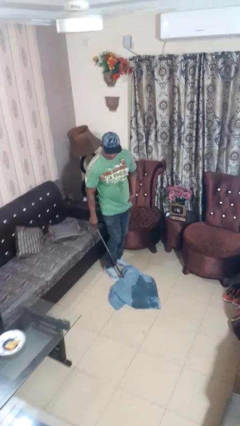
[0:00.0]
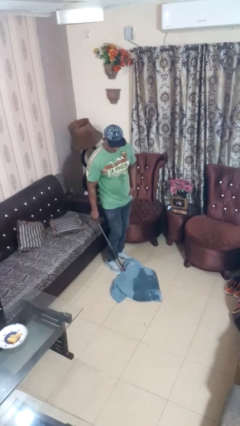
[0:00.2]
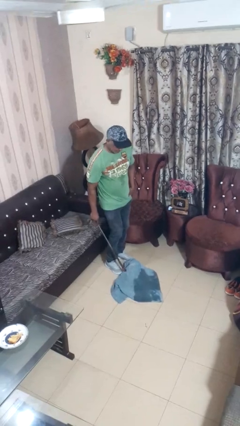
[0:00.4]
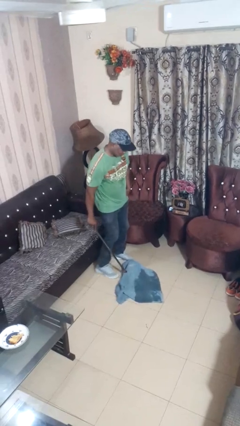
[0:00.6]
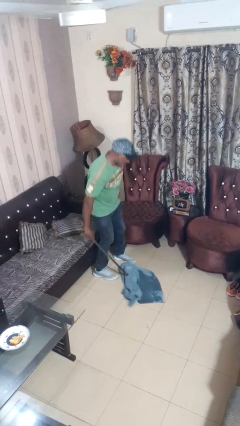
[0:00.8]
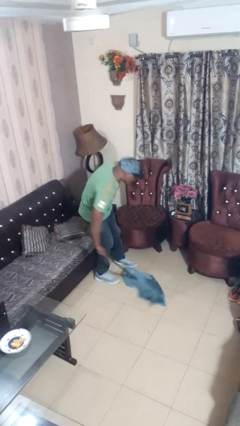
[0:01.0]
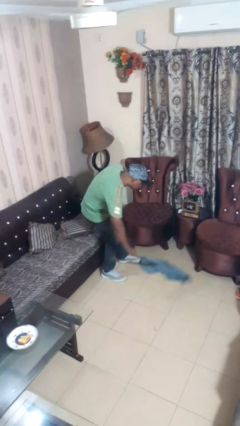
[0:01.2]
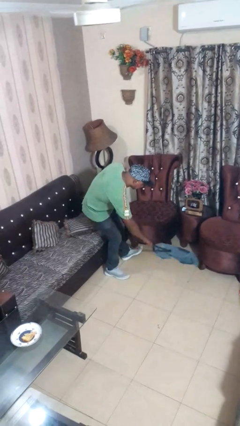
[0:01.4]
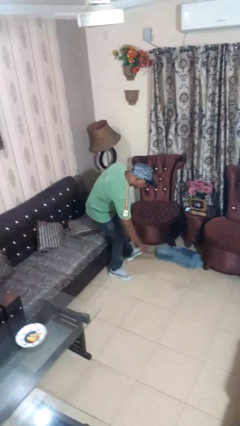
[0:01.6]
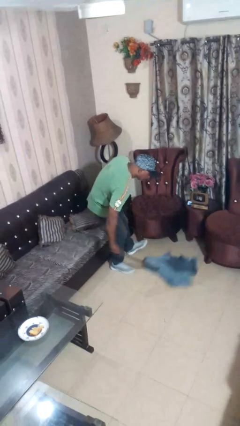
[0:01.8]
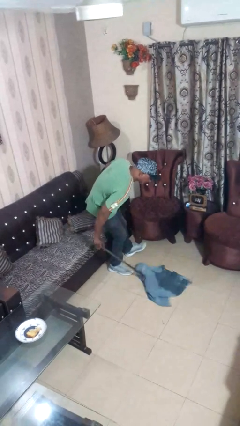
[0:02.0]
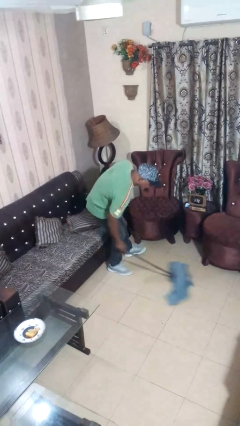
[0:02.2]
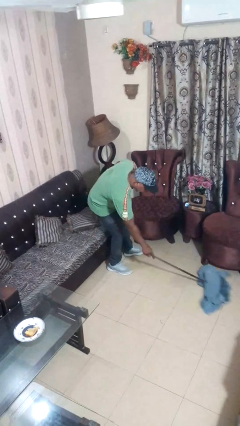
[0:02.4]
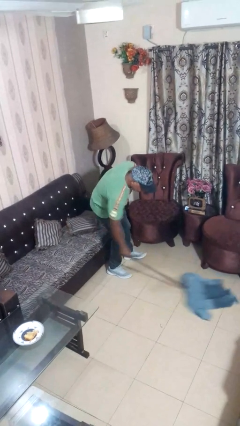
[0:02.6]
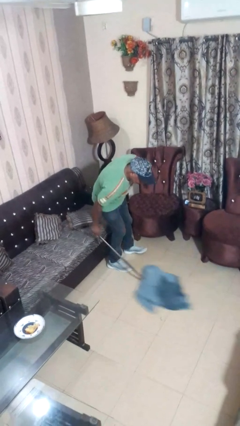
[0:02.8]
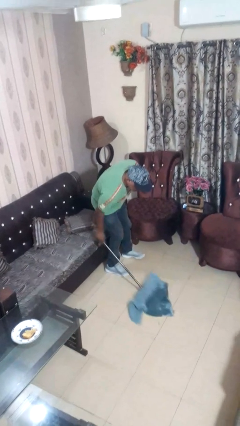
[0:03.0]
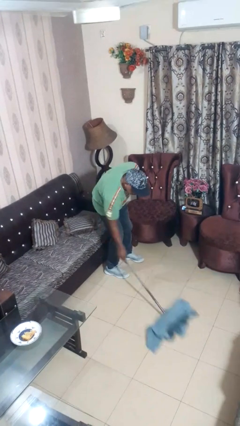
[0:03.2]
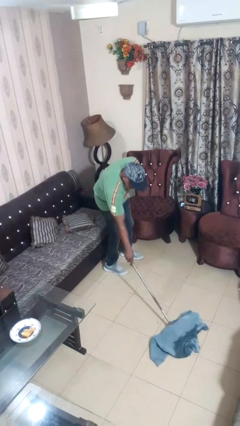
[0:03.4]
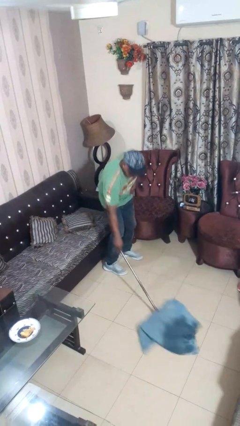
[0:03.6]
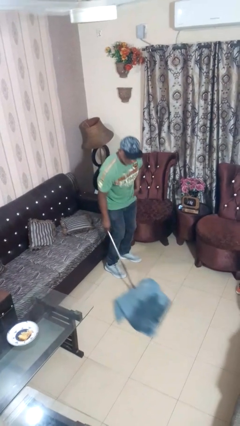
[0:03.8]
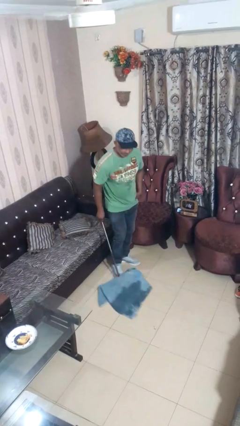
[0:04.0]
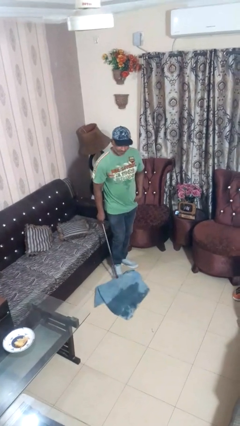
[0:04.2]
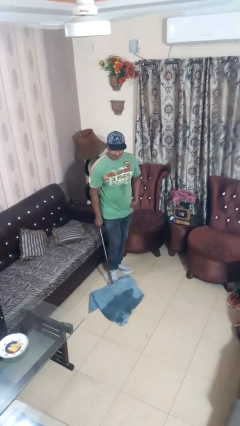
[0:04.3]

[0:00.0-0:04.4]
person mops

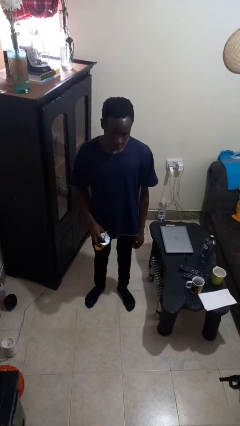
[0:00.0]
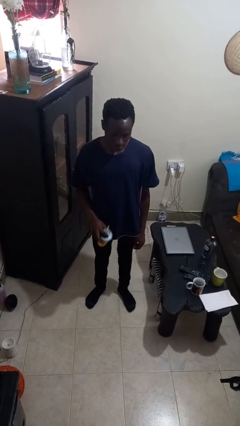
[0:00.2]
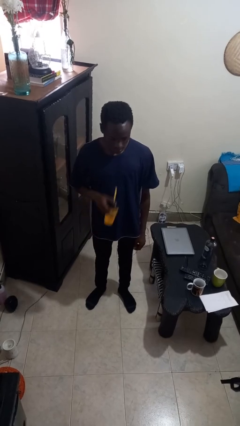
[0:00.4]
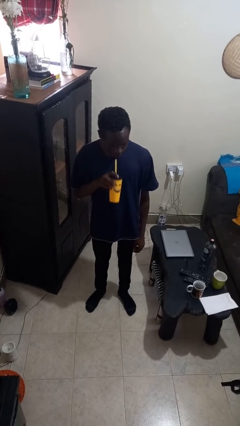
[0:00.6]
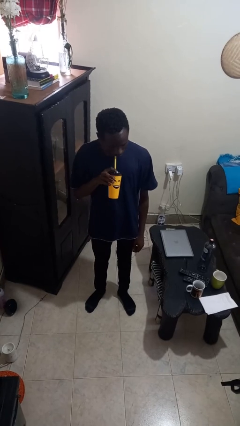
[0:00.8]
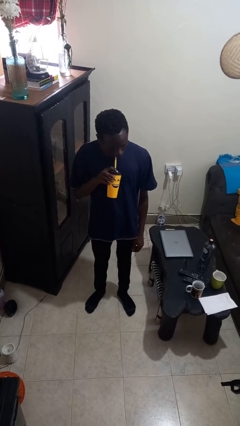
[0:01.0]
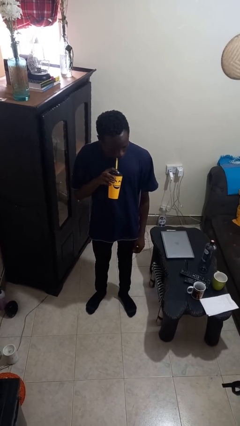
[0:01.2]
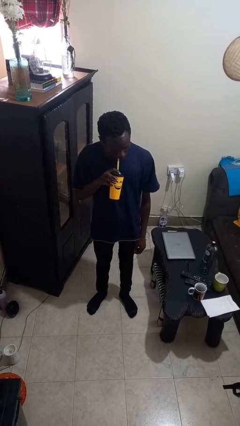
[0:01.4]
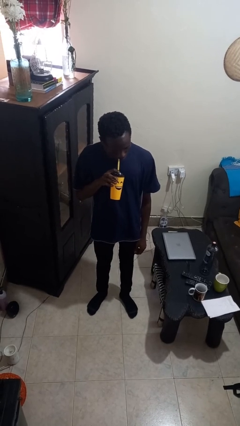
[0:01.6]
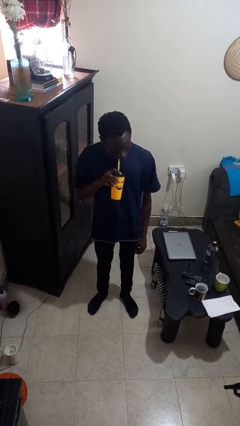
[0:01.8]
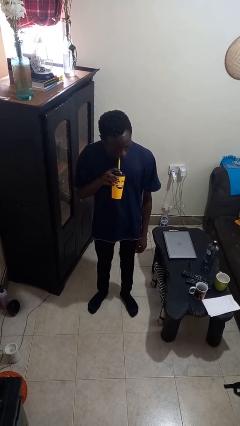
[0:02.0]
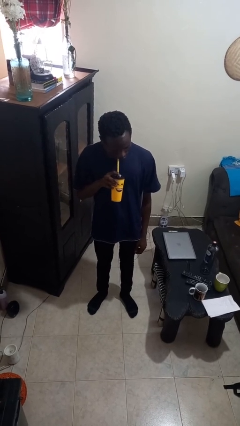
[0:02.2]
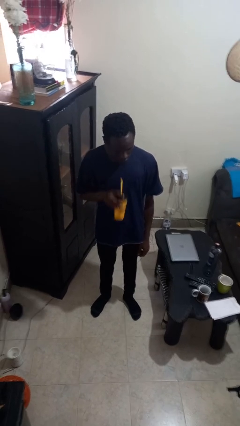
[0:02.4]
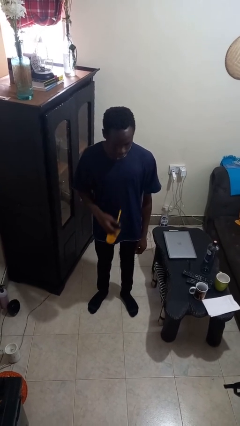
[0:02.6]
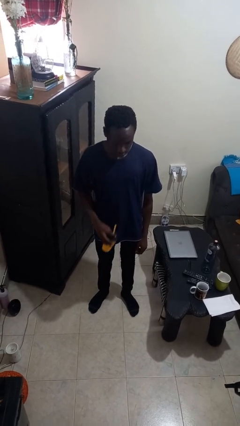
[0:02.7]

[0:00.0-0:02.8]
person drinks from straw

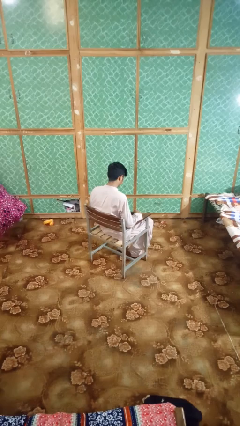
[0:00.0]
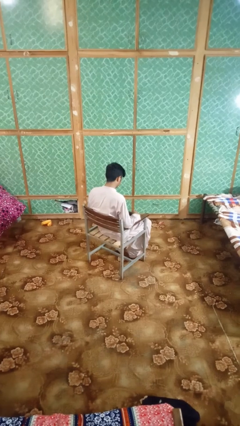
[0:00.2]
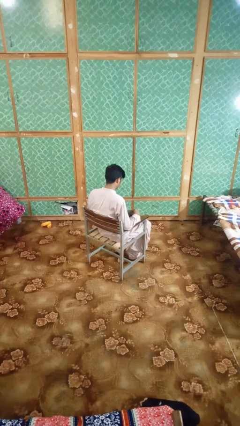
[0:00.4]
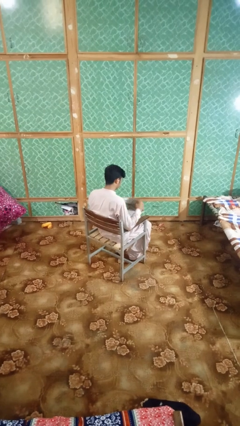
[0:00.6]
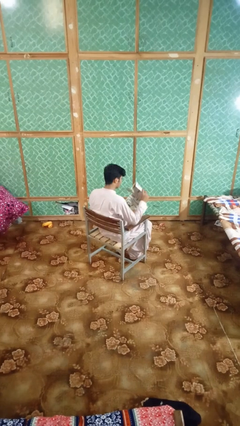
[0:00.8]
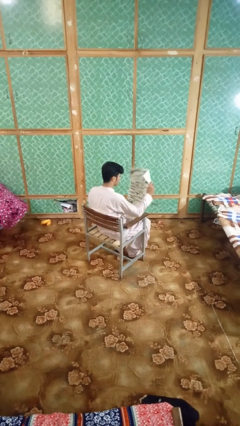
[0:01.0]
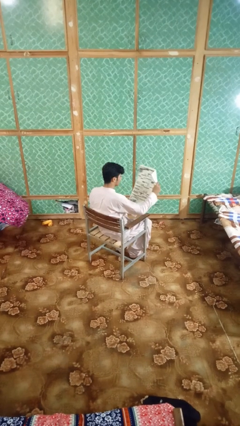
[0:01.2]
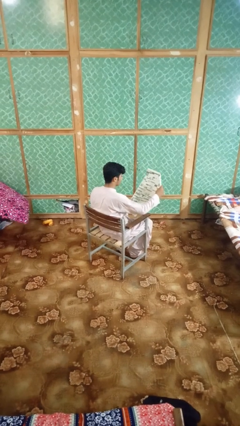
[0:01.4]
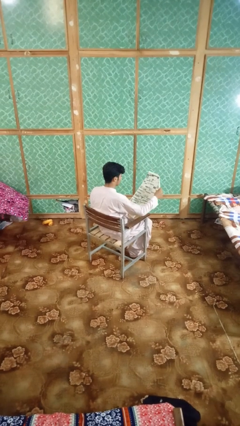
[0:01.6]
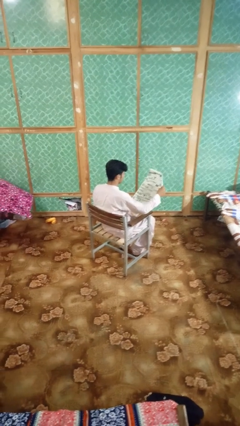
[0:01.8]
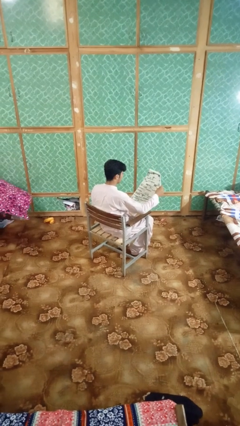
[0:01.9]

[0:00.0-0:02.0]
person reads newspaper

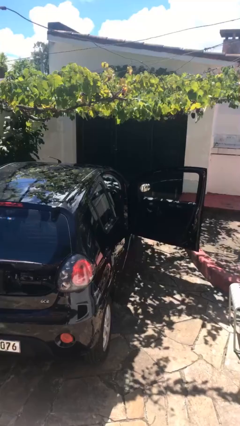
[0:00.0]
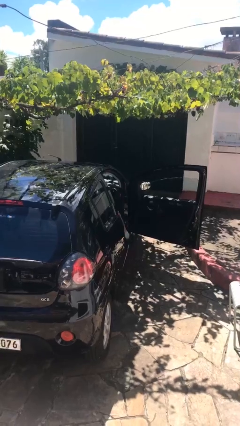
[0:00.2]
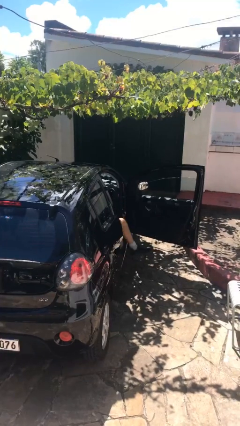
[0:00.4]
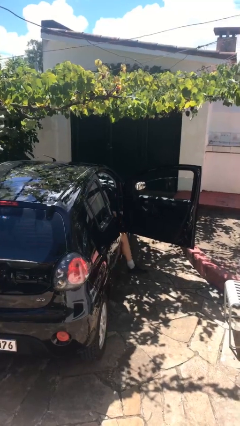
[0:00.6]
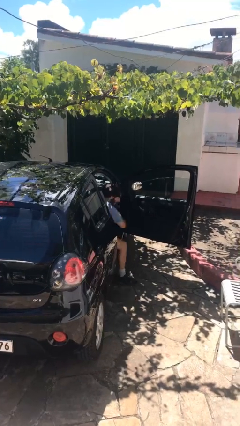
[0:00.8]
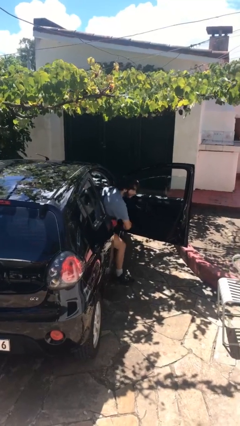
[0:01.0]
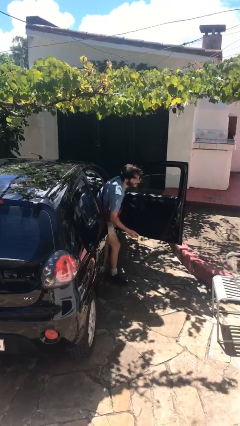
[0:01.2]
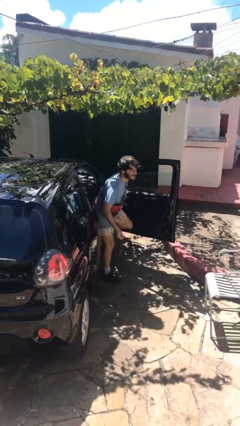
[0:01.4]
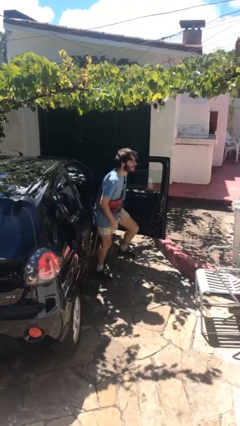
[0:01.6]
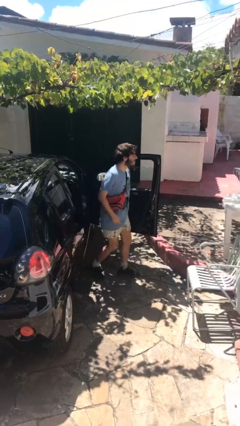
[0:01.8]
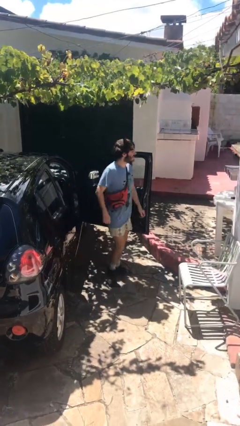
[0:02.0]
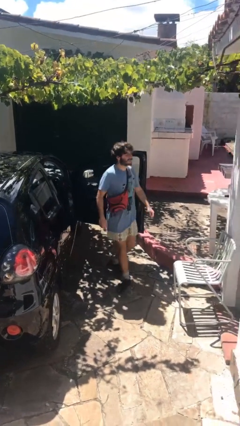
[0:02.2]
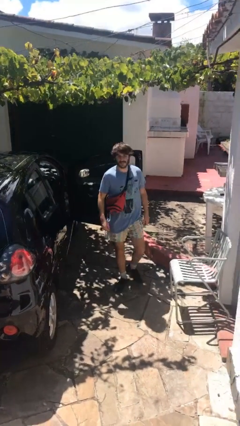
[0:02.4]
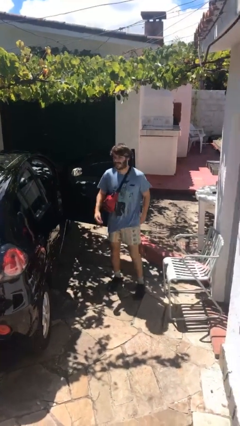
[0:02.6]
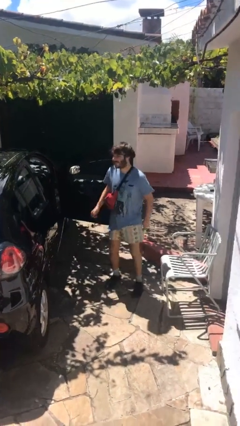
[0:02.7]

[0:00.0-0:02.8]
person exits car

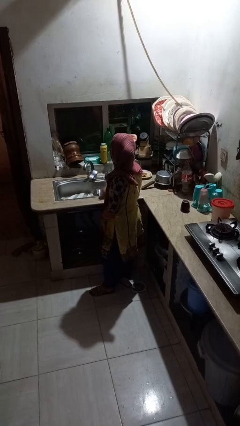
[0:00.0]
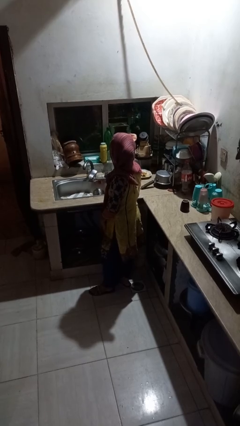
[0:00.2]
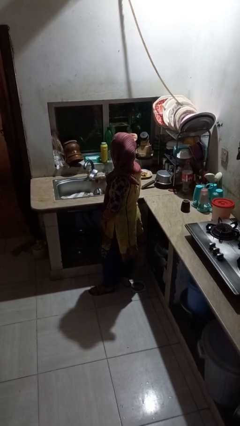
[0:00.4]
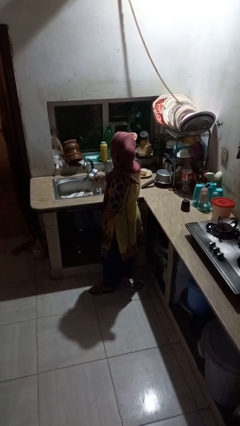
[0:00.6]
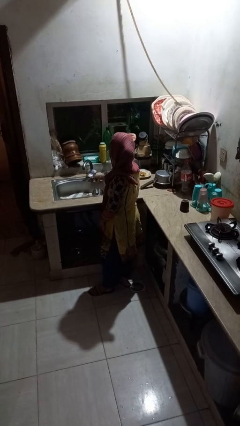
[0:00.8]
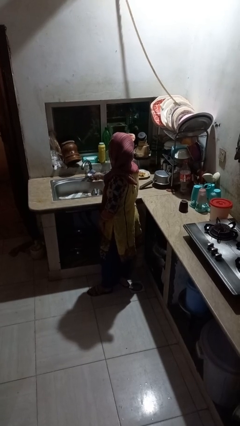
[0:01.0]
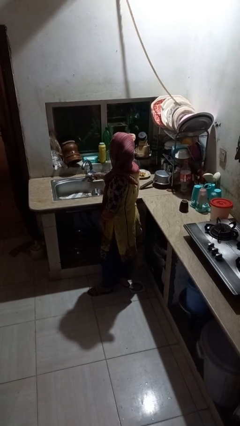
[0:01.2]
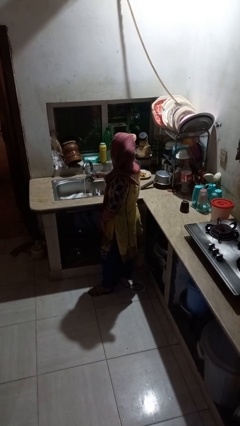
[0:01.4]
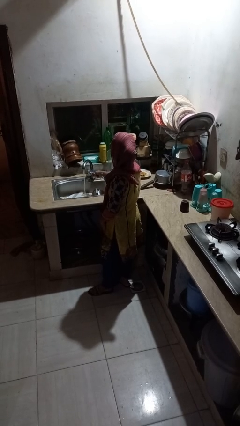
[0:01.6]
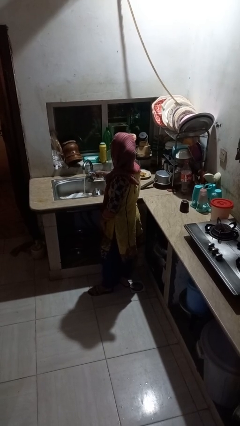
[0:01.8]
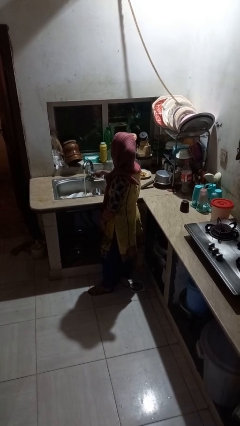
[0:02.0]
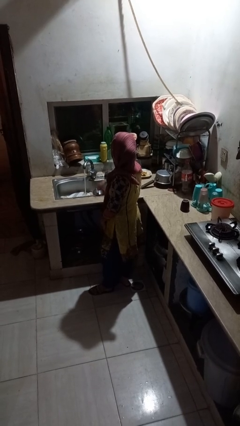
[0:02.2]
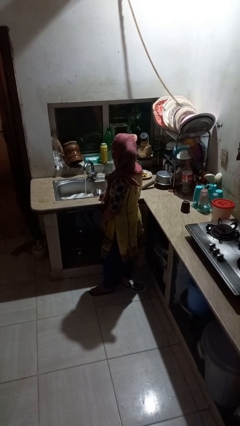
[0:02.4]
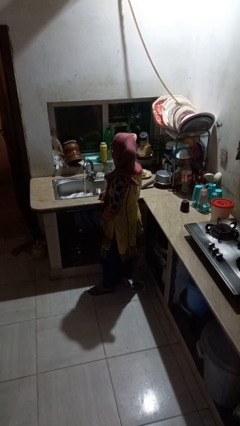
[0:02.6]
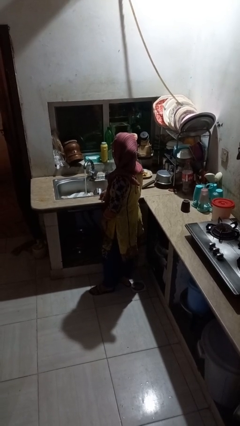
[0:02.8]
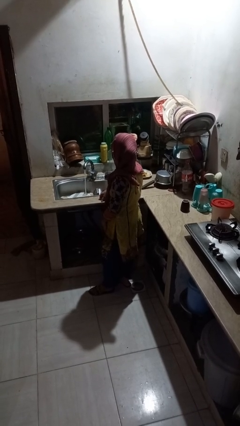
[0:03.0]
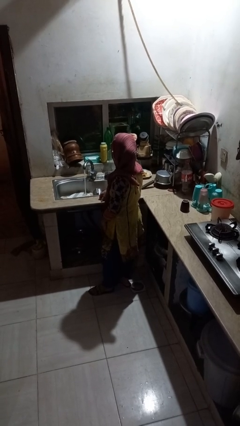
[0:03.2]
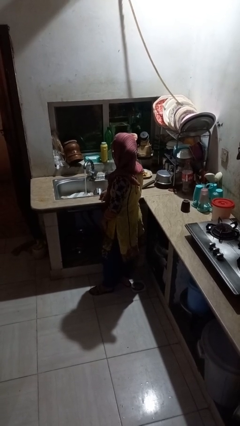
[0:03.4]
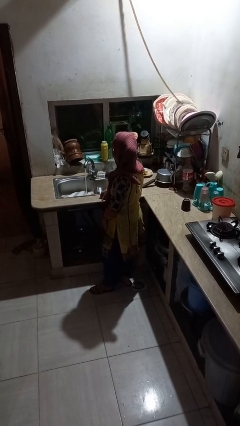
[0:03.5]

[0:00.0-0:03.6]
person turns on faucet

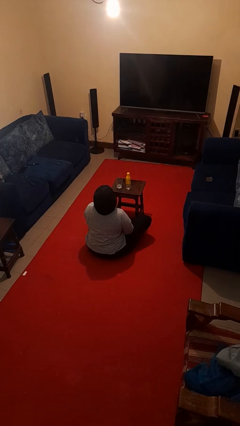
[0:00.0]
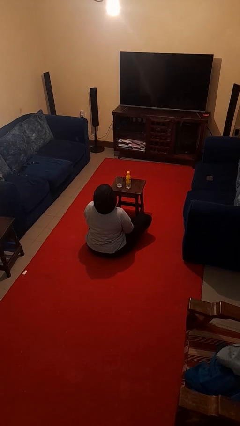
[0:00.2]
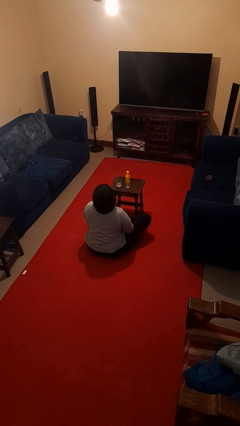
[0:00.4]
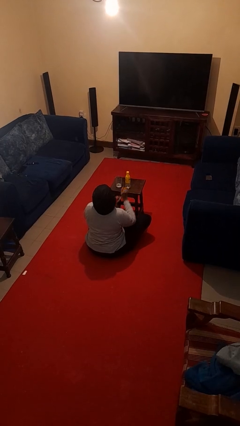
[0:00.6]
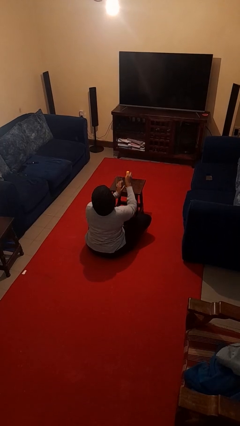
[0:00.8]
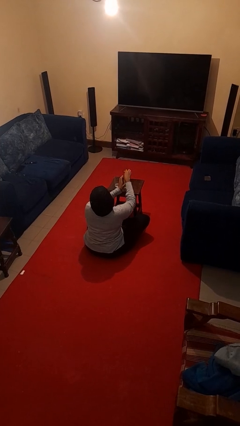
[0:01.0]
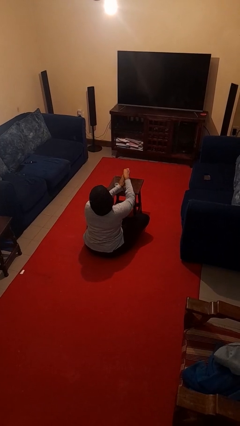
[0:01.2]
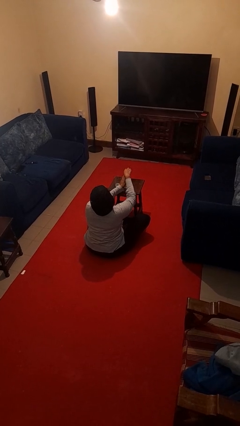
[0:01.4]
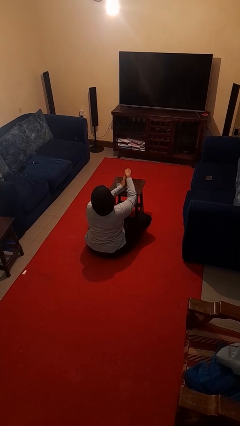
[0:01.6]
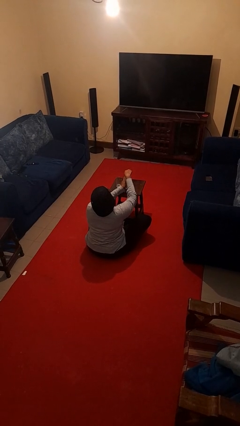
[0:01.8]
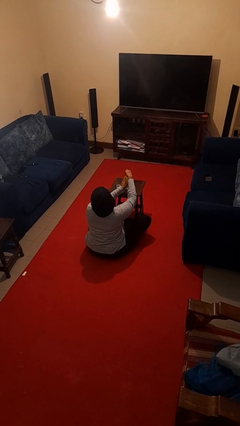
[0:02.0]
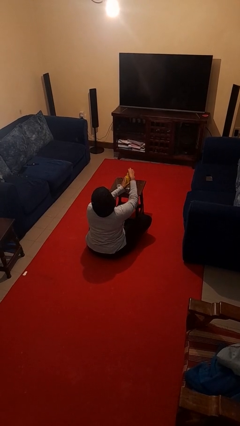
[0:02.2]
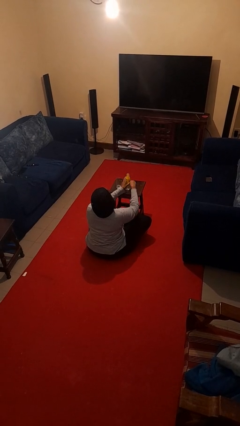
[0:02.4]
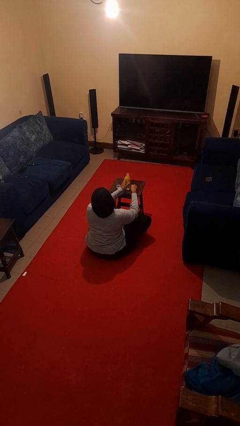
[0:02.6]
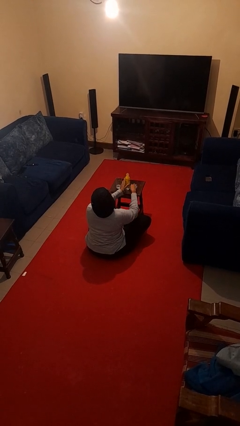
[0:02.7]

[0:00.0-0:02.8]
person unscrews lid from bottle
